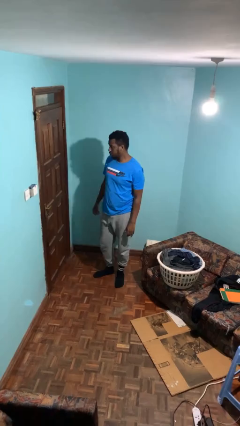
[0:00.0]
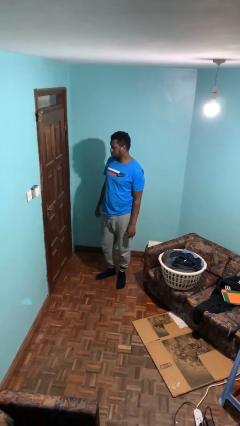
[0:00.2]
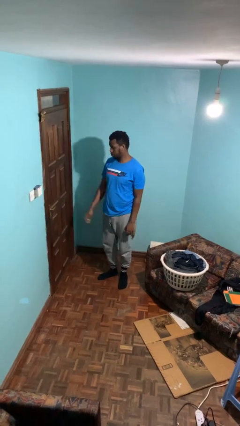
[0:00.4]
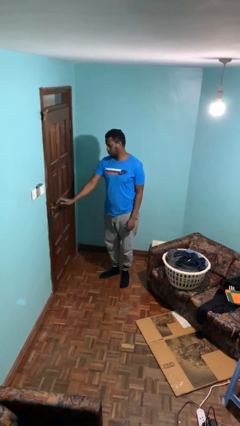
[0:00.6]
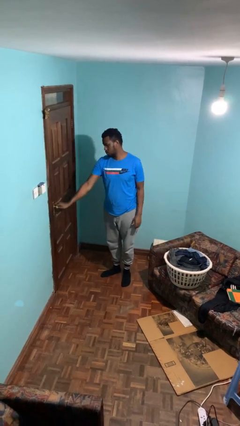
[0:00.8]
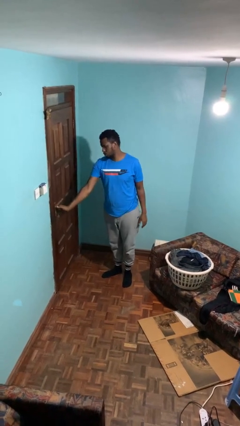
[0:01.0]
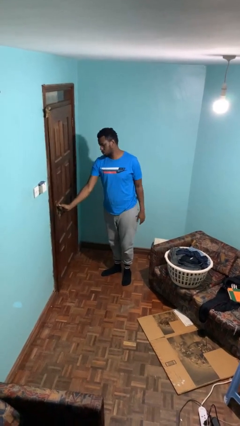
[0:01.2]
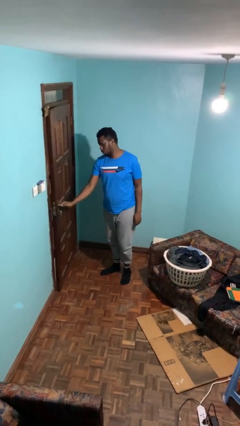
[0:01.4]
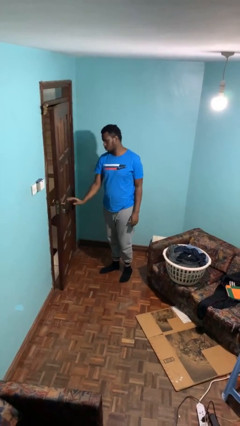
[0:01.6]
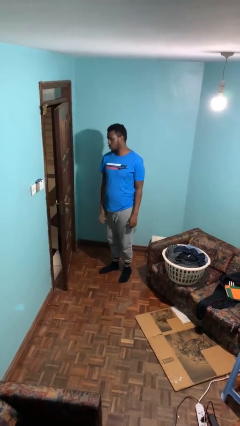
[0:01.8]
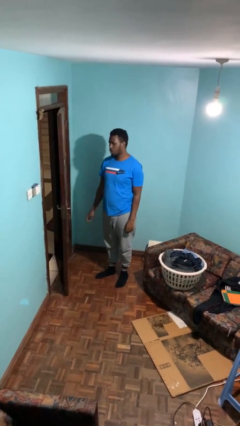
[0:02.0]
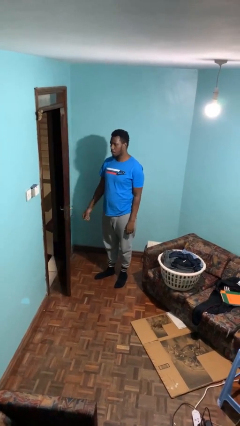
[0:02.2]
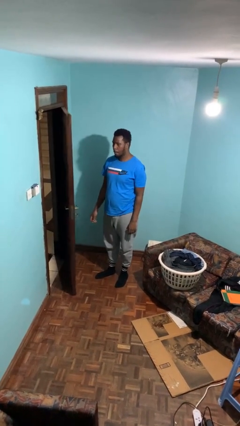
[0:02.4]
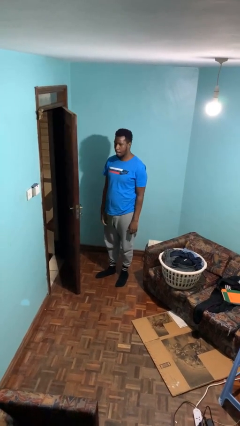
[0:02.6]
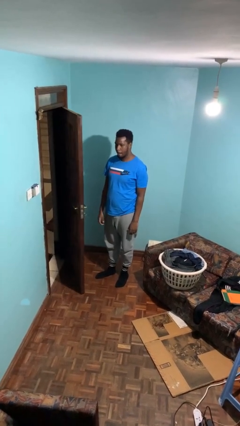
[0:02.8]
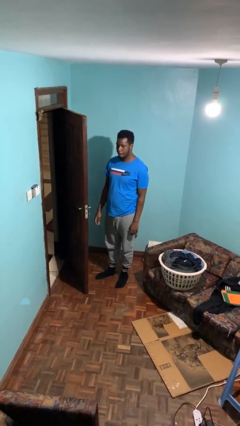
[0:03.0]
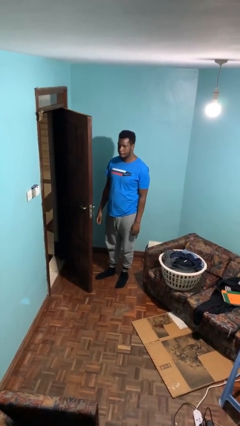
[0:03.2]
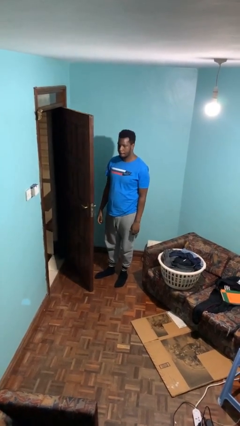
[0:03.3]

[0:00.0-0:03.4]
person opens facility door

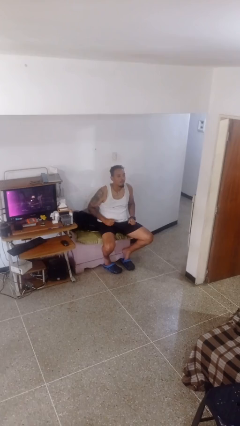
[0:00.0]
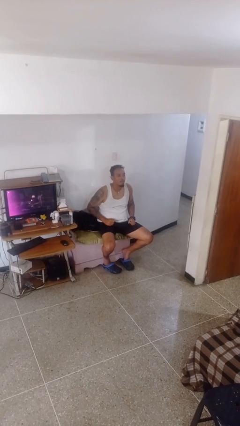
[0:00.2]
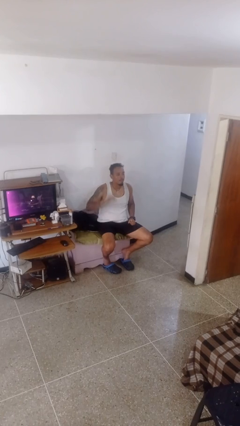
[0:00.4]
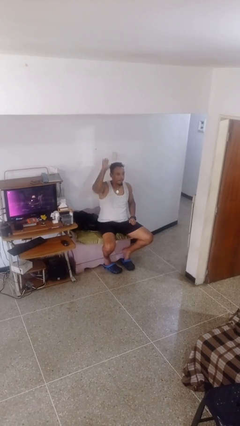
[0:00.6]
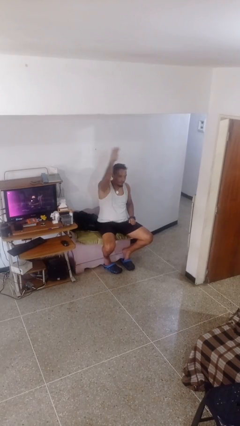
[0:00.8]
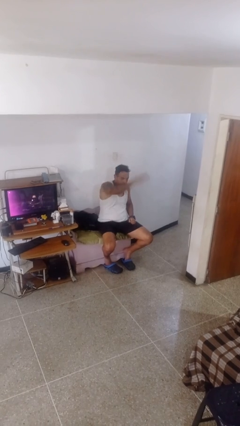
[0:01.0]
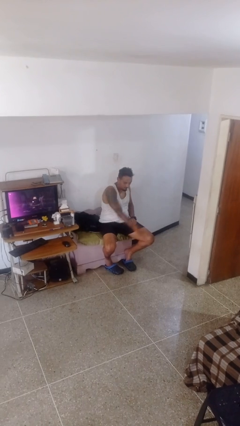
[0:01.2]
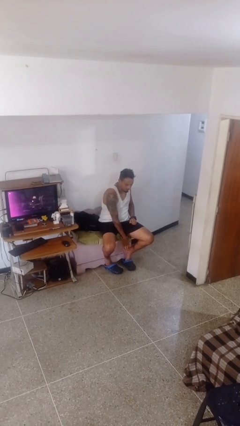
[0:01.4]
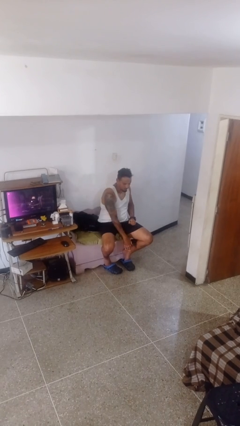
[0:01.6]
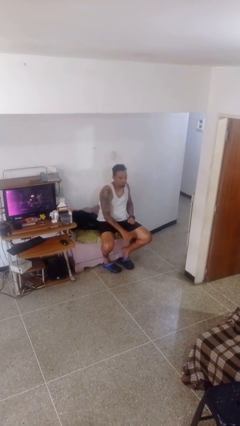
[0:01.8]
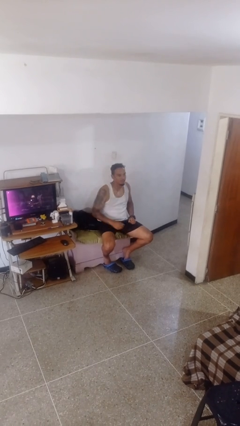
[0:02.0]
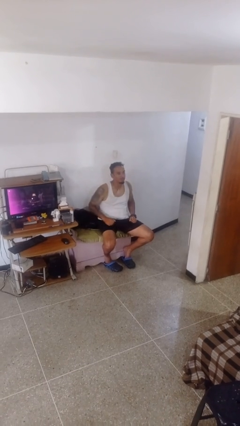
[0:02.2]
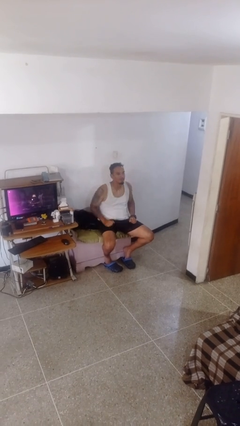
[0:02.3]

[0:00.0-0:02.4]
person gestures swipe down

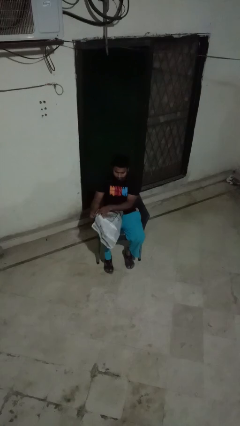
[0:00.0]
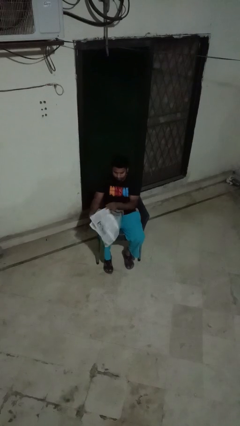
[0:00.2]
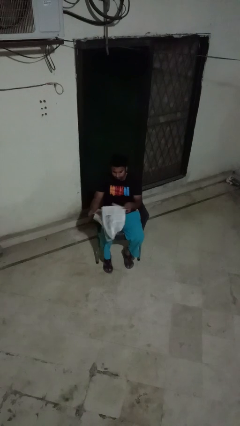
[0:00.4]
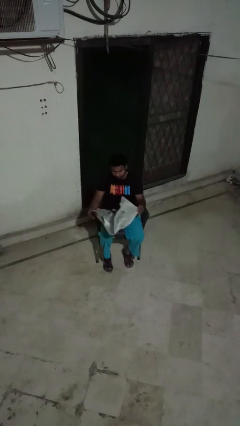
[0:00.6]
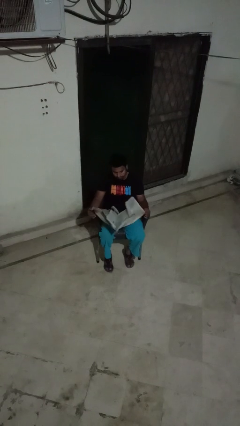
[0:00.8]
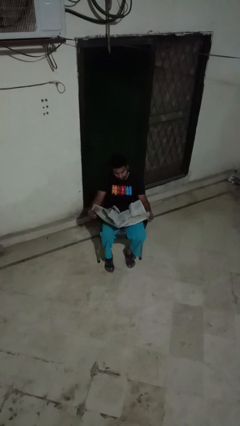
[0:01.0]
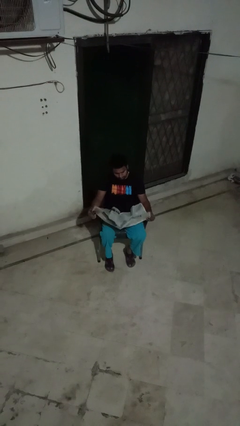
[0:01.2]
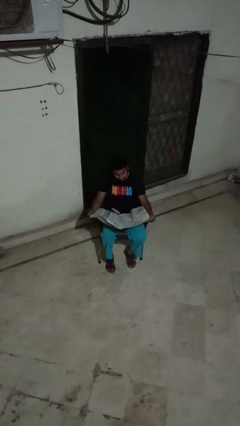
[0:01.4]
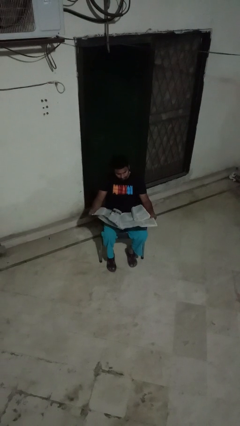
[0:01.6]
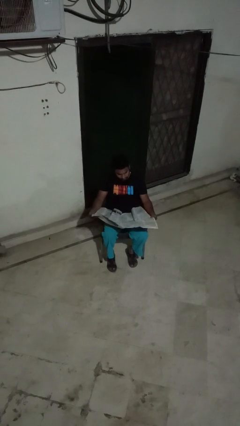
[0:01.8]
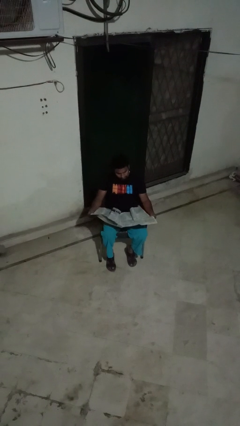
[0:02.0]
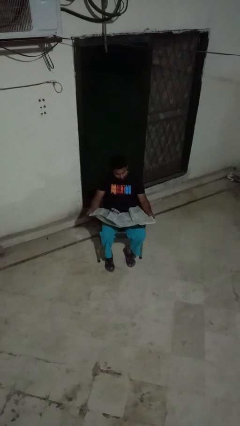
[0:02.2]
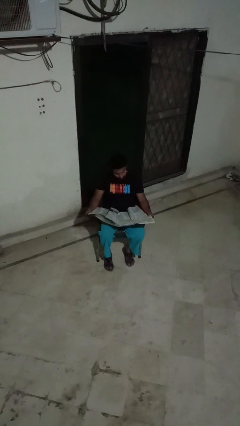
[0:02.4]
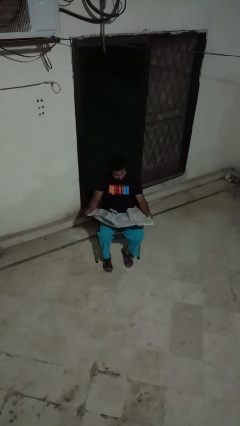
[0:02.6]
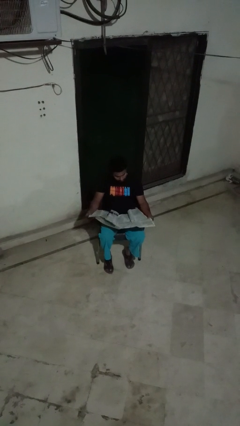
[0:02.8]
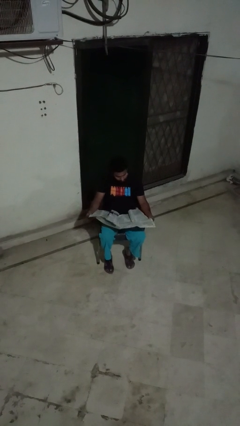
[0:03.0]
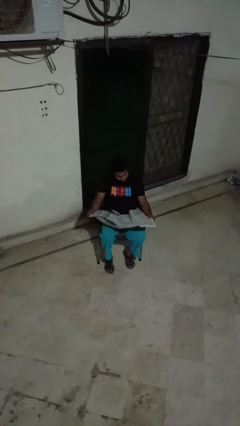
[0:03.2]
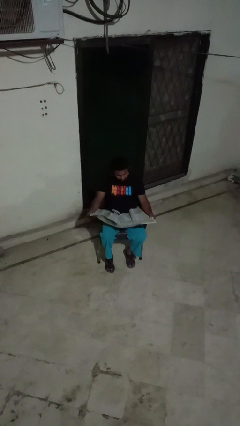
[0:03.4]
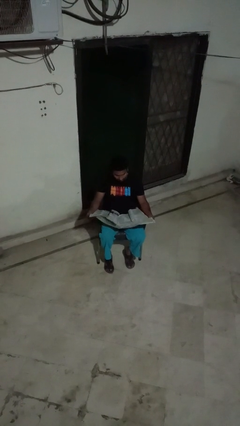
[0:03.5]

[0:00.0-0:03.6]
person reads newspaper

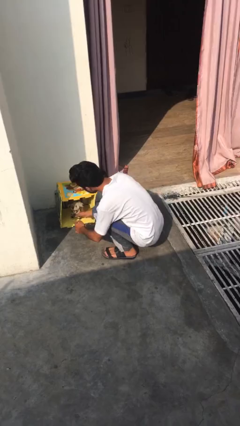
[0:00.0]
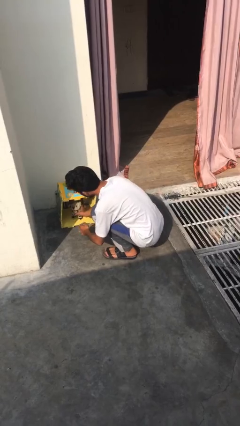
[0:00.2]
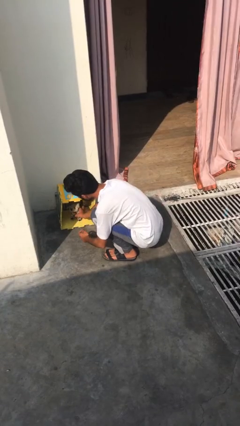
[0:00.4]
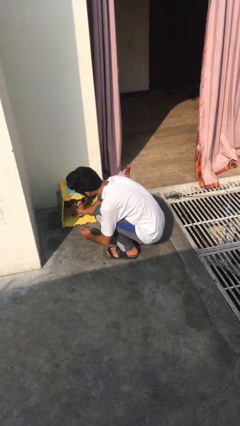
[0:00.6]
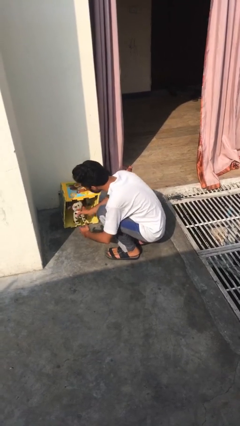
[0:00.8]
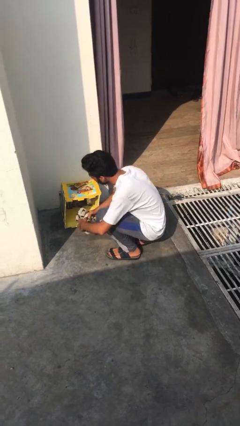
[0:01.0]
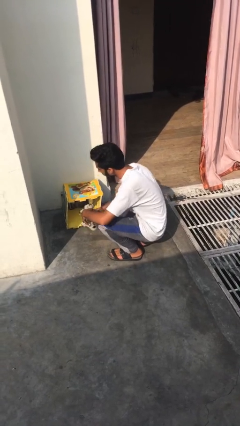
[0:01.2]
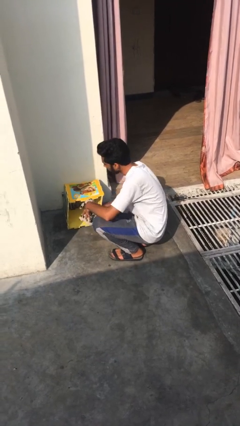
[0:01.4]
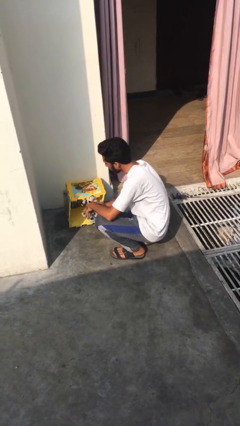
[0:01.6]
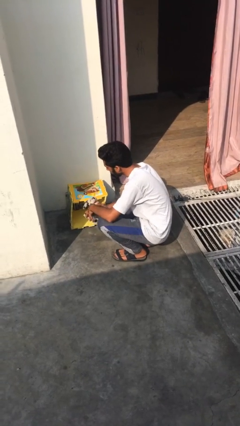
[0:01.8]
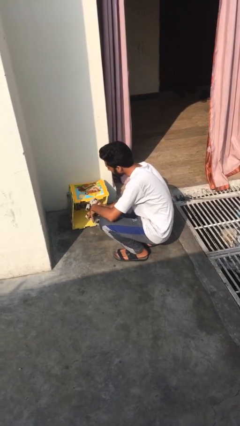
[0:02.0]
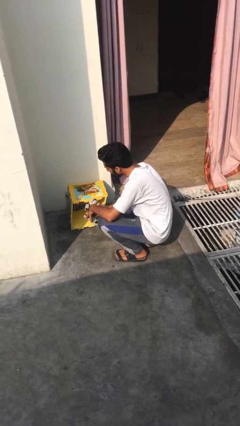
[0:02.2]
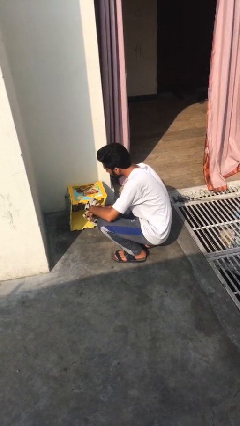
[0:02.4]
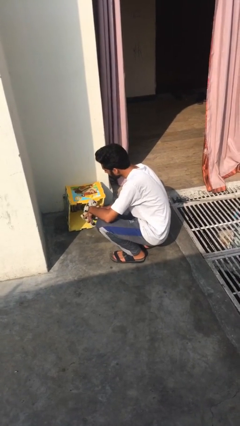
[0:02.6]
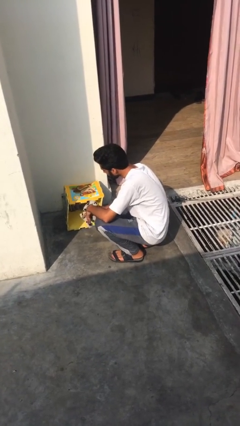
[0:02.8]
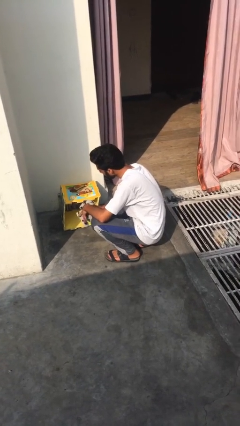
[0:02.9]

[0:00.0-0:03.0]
person uncrates dog

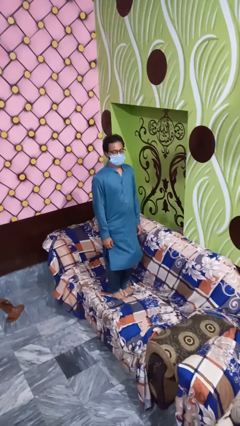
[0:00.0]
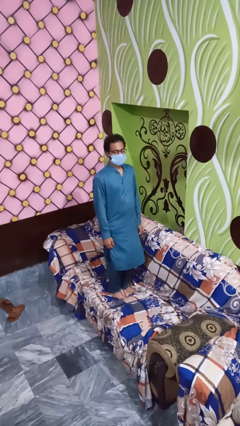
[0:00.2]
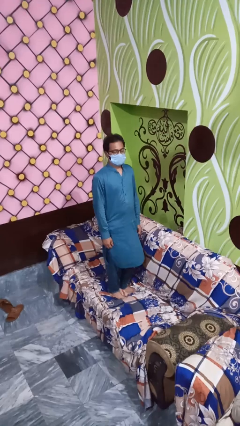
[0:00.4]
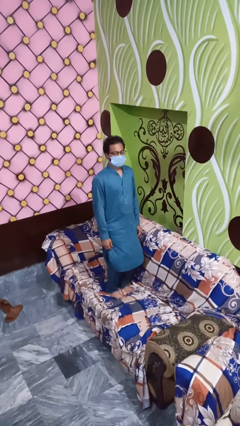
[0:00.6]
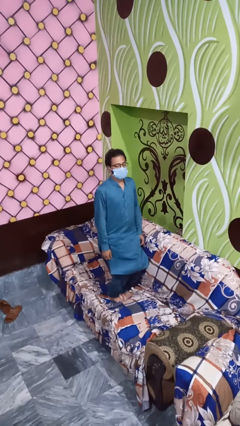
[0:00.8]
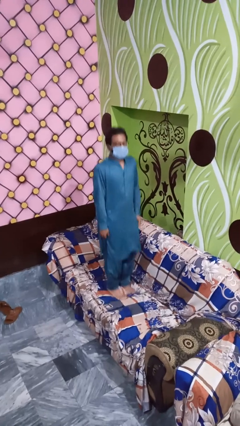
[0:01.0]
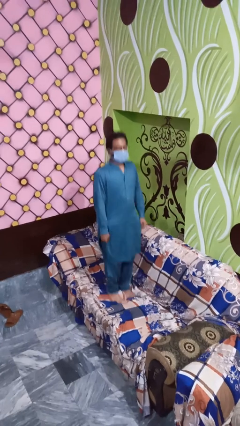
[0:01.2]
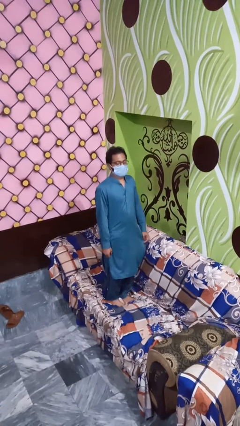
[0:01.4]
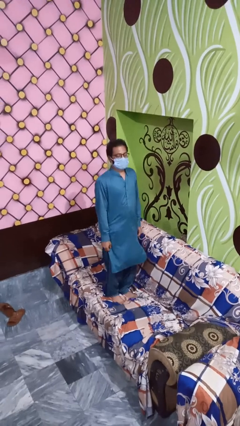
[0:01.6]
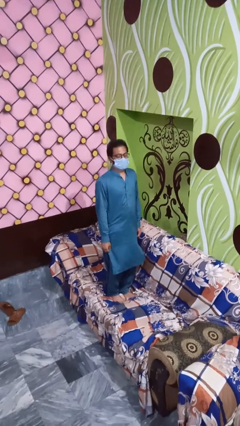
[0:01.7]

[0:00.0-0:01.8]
person jumps on couch

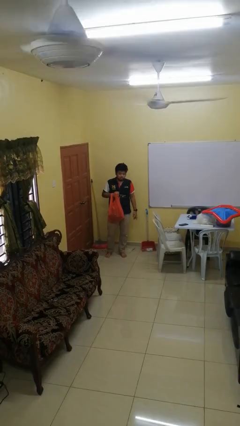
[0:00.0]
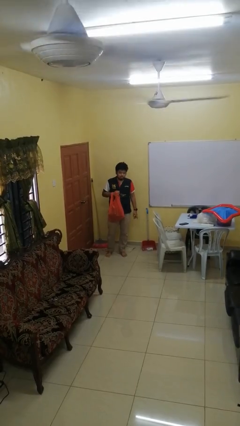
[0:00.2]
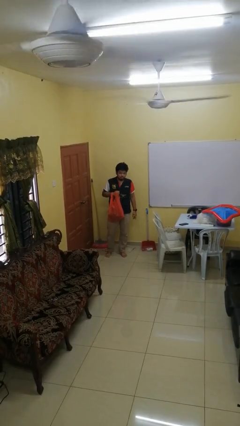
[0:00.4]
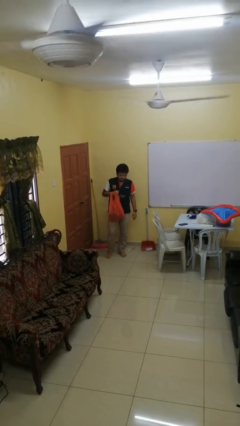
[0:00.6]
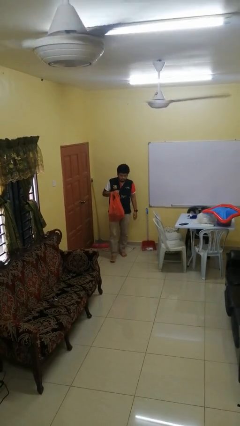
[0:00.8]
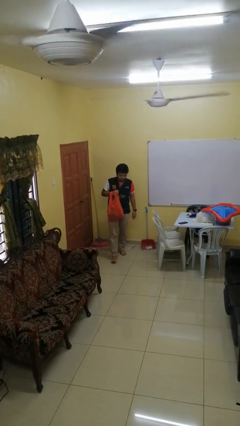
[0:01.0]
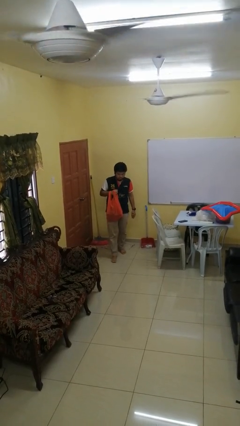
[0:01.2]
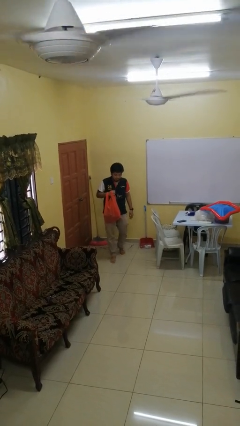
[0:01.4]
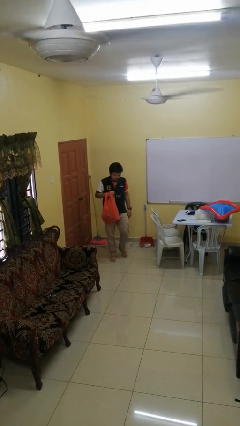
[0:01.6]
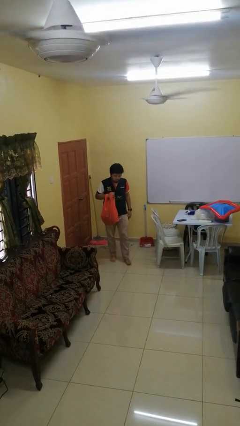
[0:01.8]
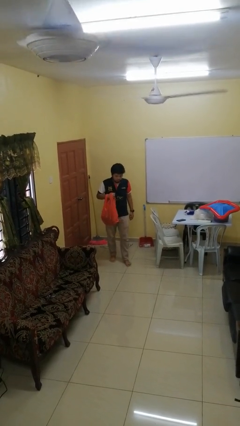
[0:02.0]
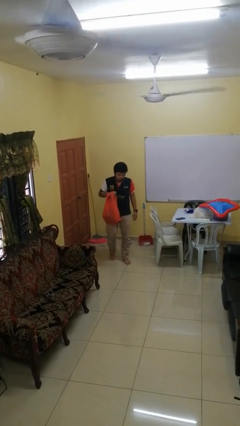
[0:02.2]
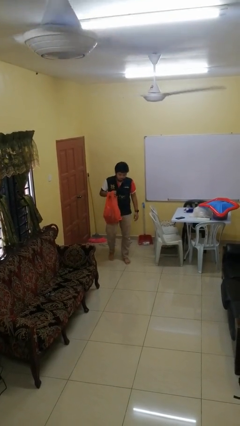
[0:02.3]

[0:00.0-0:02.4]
person carries groceries

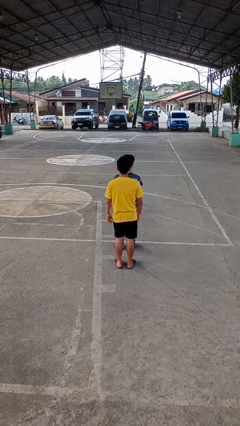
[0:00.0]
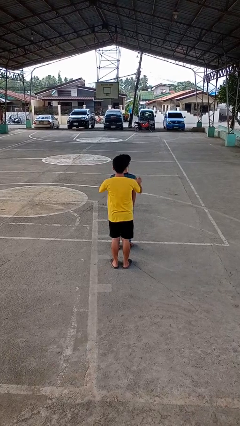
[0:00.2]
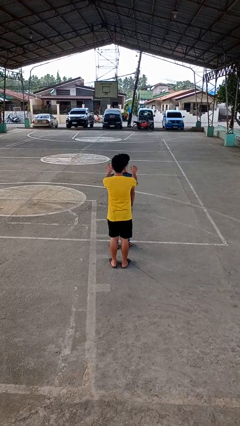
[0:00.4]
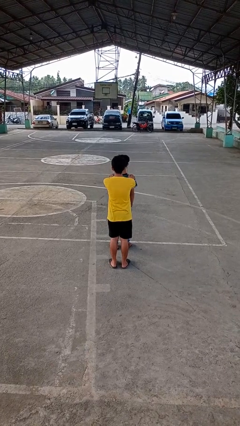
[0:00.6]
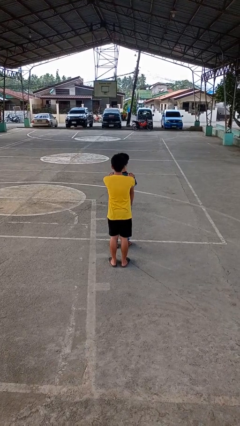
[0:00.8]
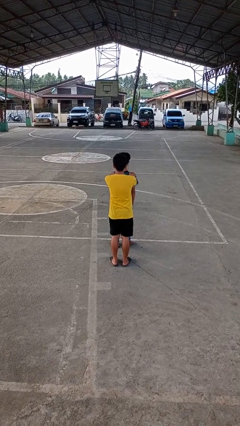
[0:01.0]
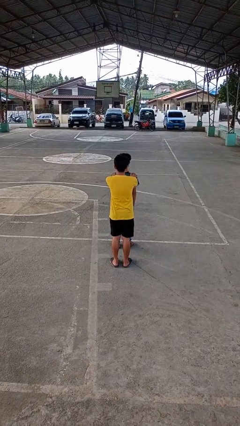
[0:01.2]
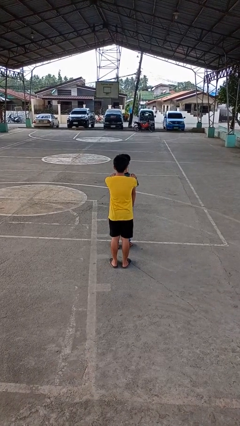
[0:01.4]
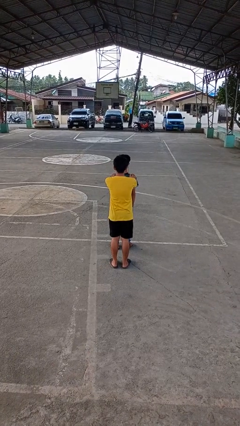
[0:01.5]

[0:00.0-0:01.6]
person grabs person by shoulder
